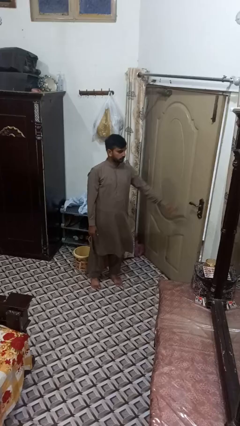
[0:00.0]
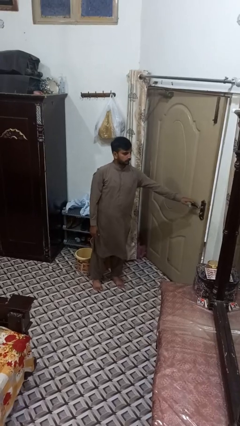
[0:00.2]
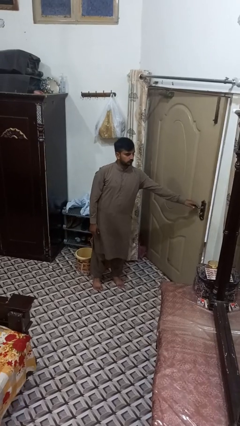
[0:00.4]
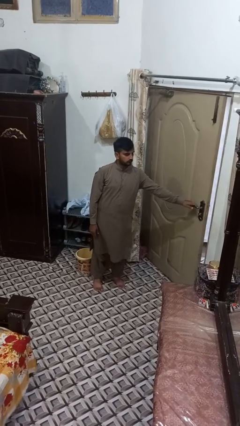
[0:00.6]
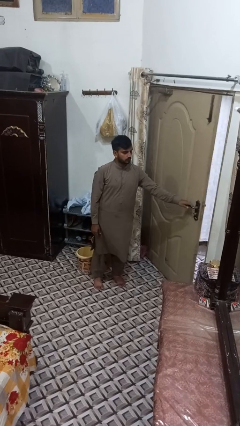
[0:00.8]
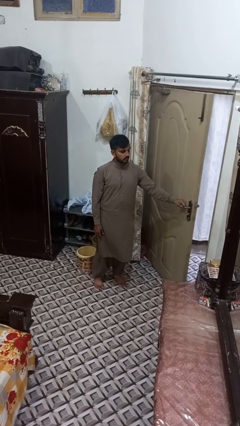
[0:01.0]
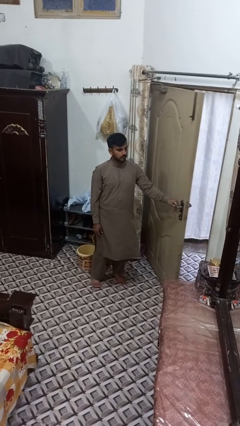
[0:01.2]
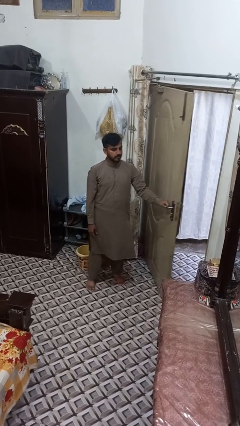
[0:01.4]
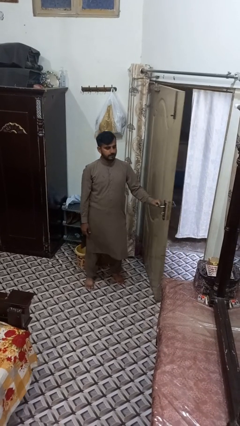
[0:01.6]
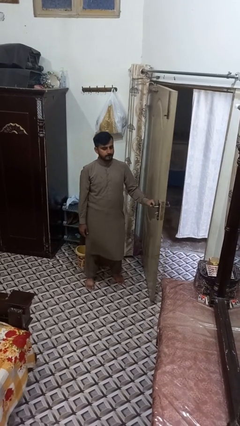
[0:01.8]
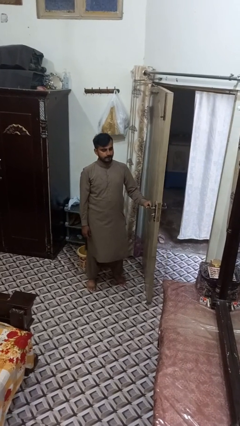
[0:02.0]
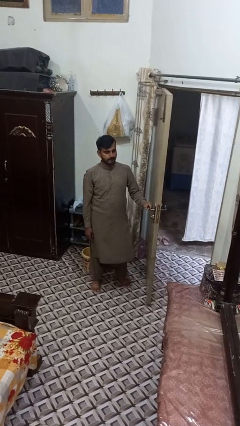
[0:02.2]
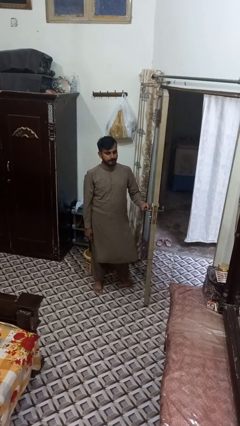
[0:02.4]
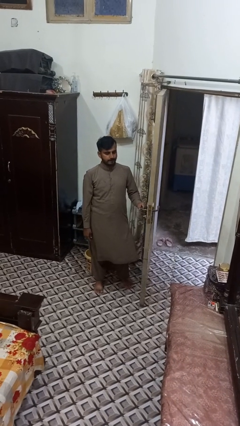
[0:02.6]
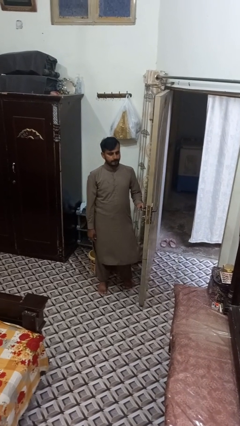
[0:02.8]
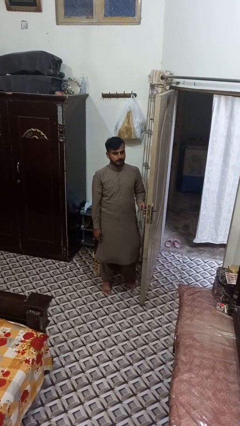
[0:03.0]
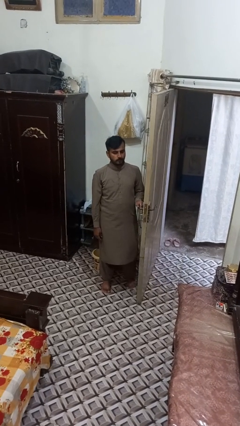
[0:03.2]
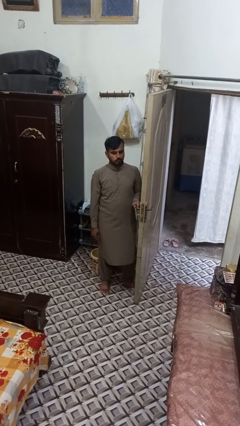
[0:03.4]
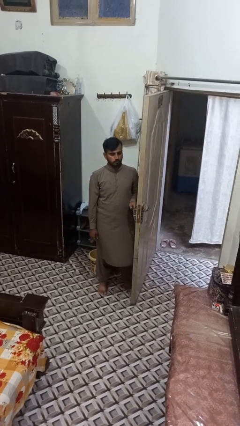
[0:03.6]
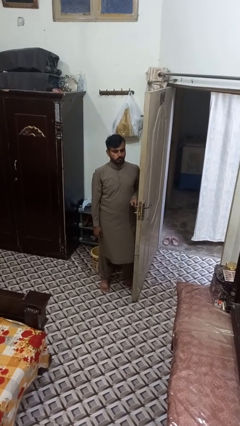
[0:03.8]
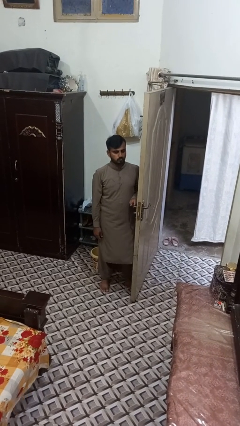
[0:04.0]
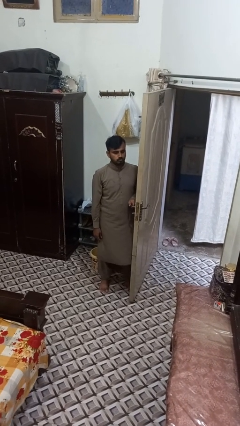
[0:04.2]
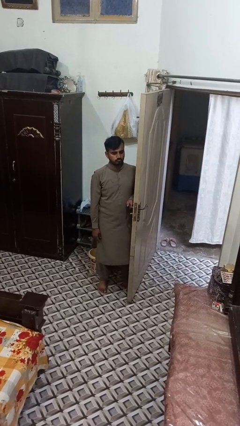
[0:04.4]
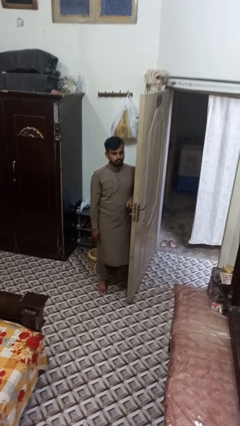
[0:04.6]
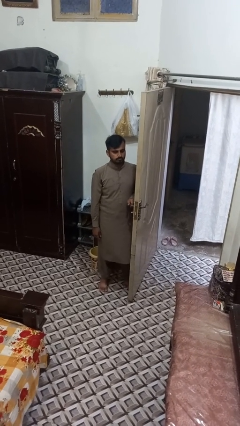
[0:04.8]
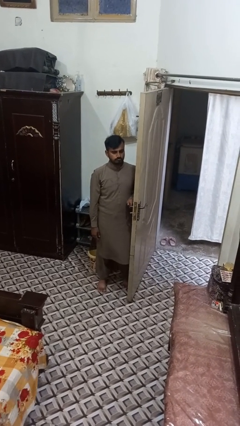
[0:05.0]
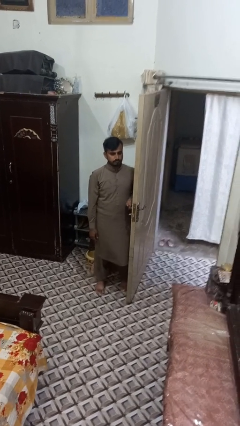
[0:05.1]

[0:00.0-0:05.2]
person opens closet door

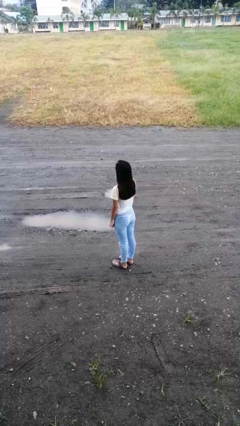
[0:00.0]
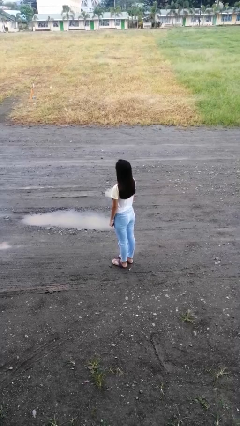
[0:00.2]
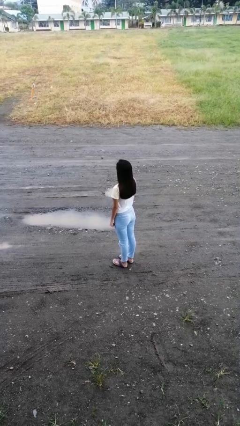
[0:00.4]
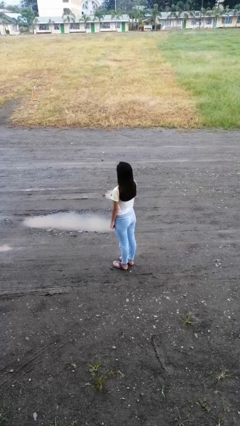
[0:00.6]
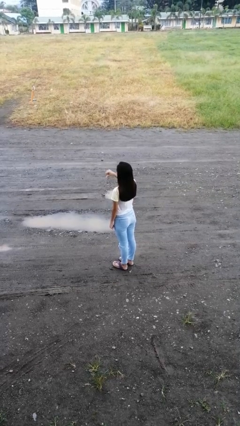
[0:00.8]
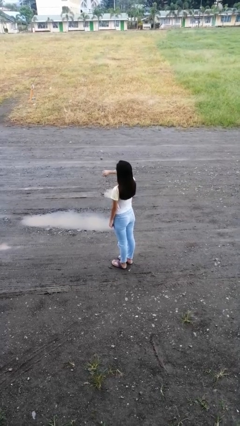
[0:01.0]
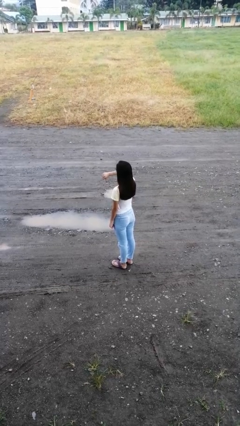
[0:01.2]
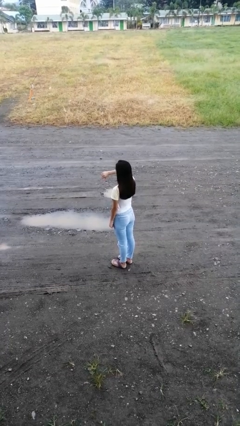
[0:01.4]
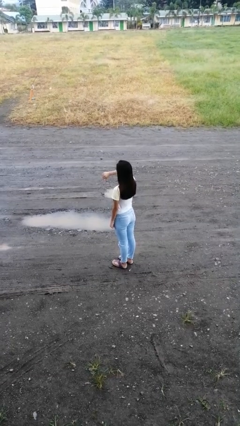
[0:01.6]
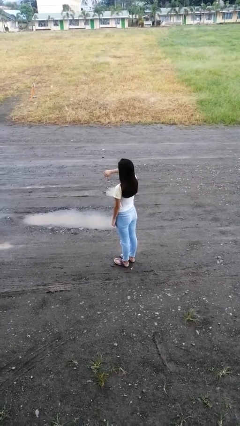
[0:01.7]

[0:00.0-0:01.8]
person gestures thumbs down

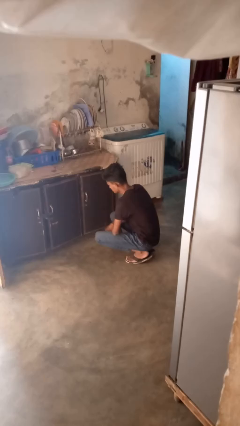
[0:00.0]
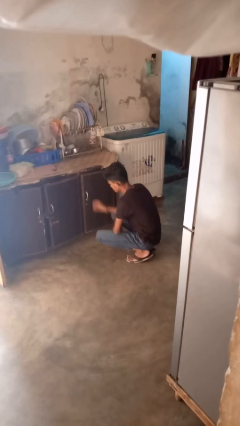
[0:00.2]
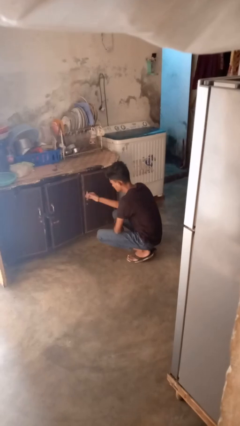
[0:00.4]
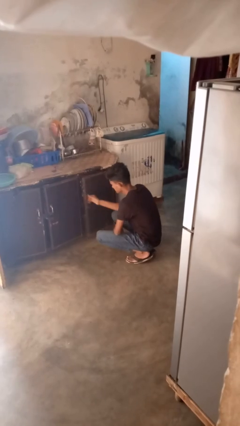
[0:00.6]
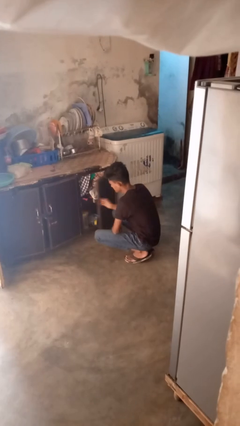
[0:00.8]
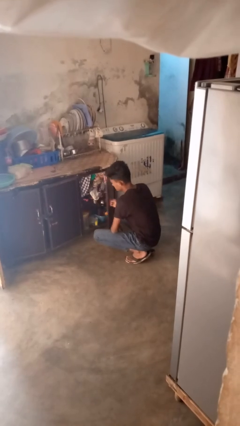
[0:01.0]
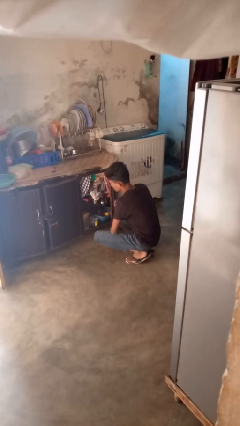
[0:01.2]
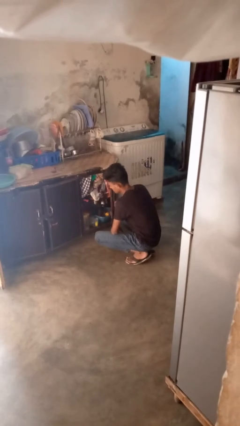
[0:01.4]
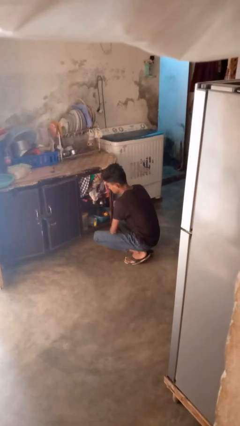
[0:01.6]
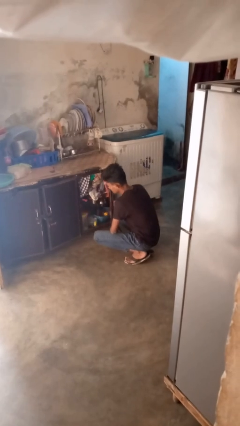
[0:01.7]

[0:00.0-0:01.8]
person opens cabinet

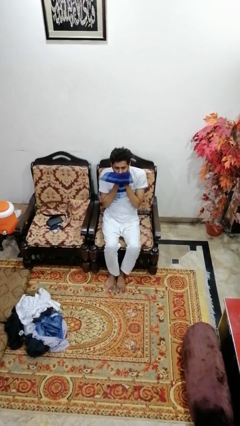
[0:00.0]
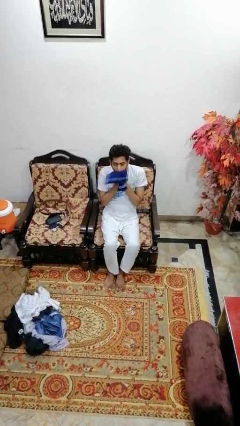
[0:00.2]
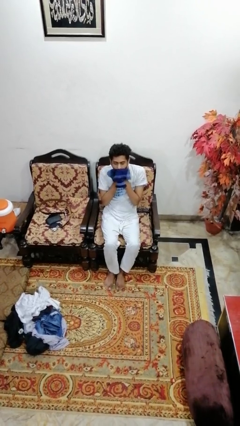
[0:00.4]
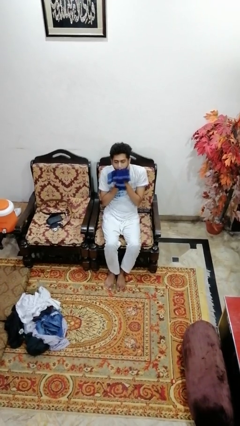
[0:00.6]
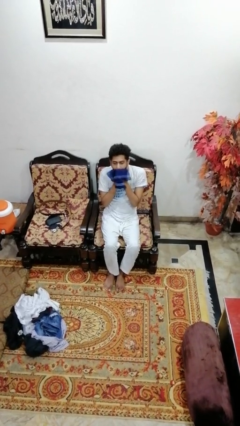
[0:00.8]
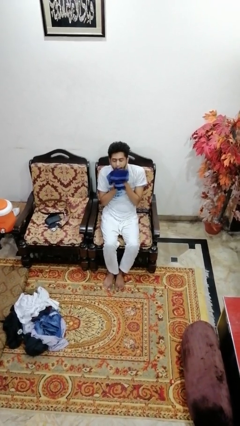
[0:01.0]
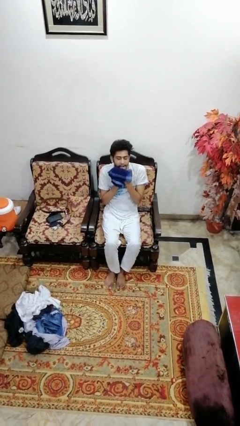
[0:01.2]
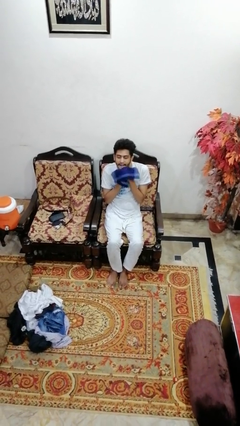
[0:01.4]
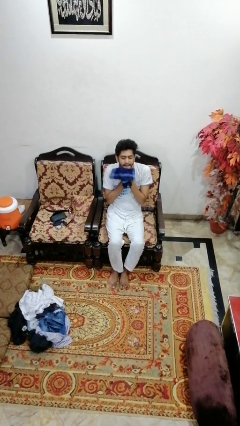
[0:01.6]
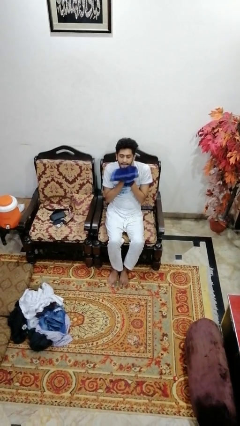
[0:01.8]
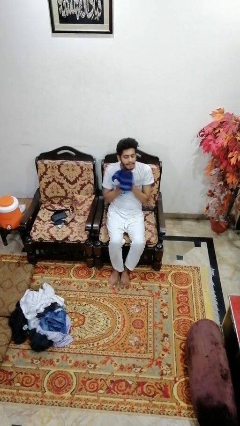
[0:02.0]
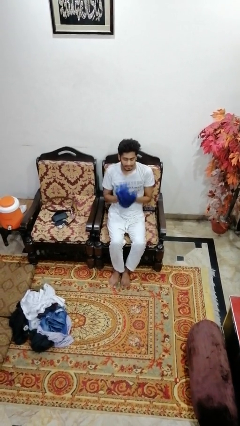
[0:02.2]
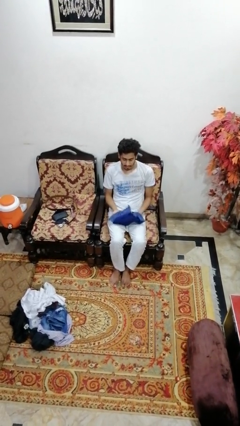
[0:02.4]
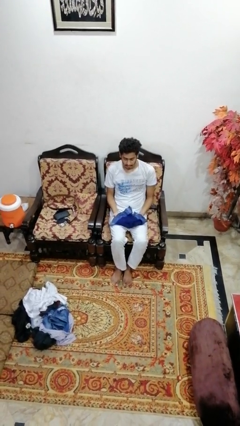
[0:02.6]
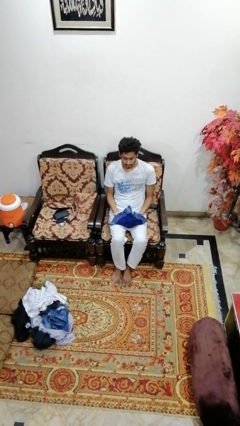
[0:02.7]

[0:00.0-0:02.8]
person wipes mouth with napkin

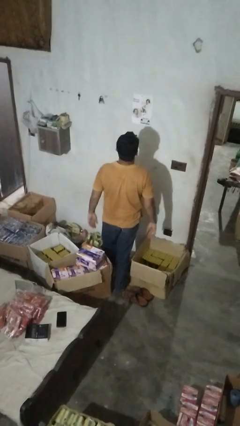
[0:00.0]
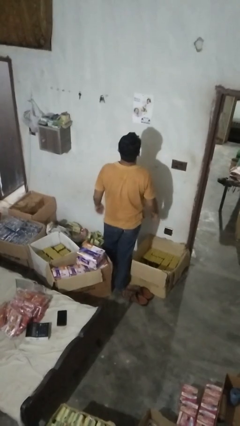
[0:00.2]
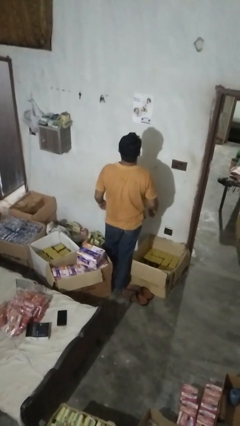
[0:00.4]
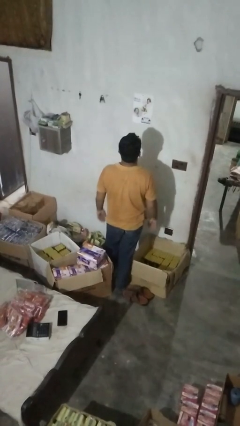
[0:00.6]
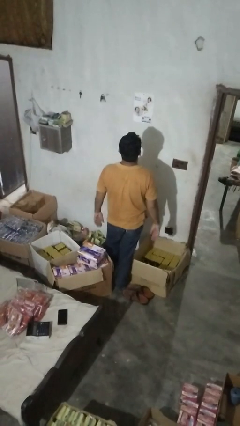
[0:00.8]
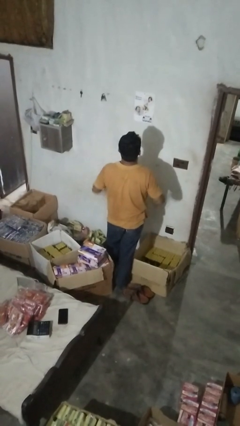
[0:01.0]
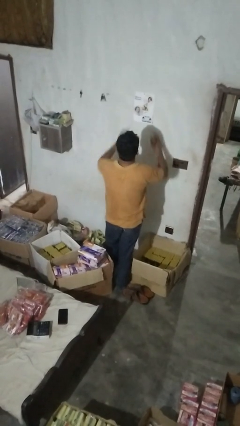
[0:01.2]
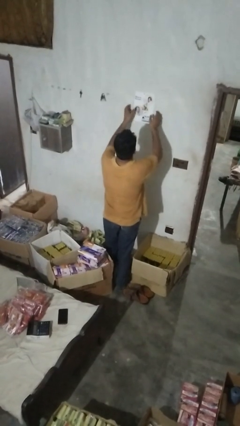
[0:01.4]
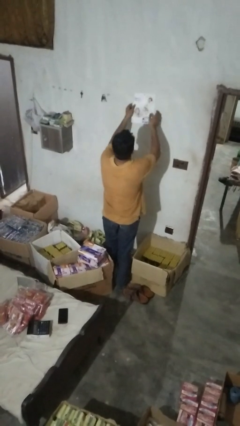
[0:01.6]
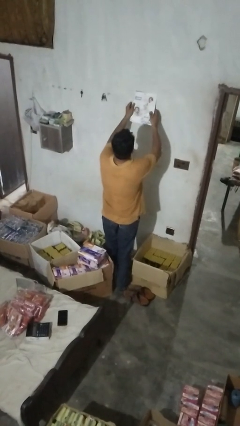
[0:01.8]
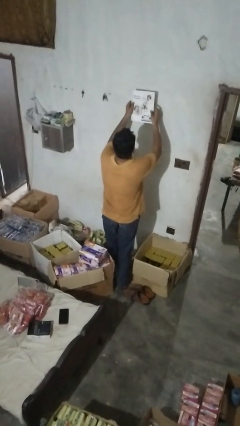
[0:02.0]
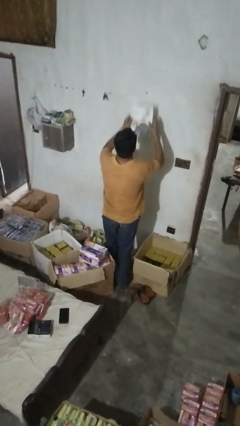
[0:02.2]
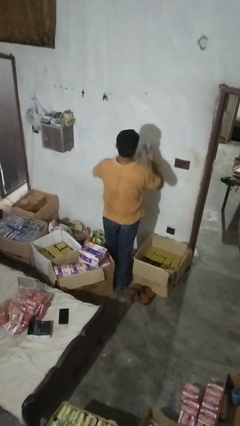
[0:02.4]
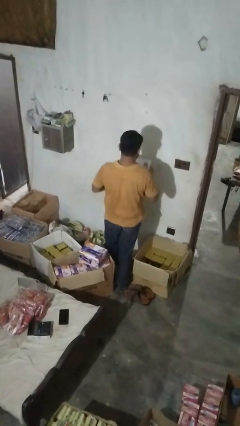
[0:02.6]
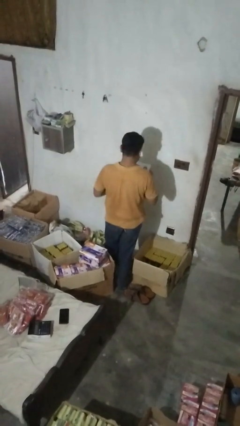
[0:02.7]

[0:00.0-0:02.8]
person takes down picture frame

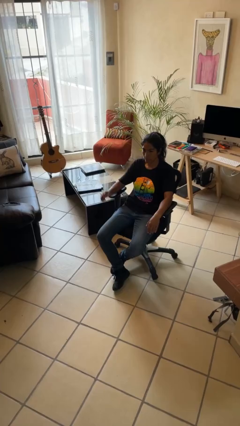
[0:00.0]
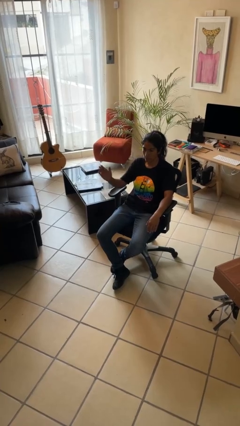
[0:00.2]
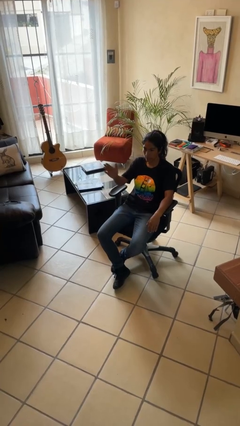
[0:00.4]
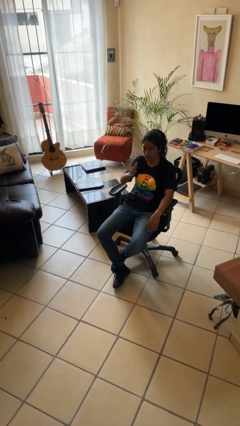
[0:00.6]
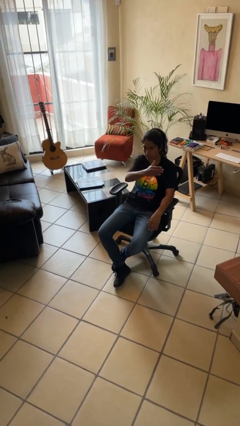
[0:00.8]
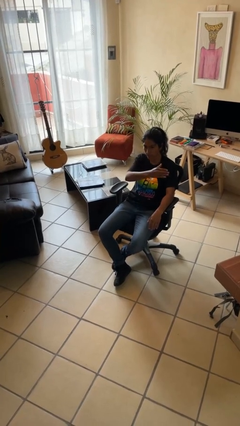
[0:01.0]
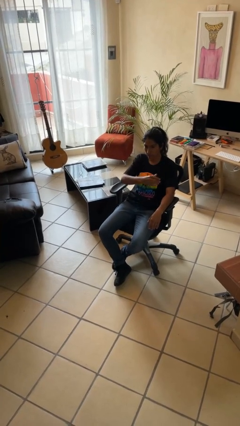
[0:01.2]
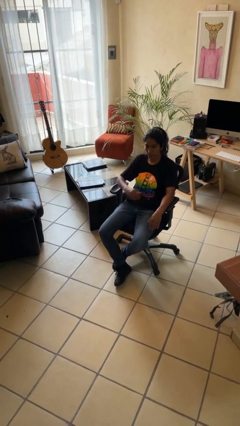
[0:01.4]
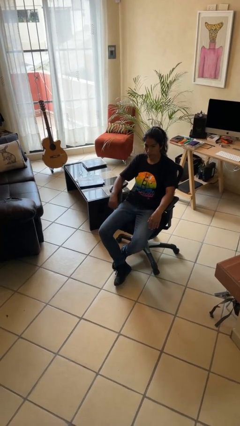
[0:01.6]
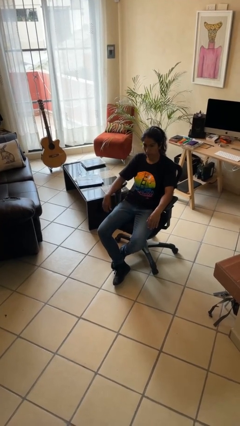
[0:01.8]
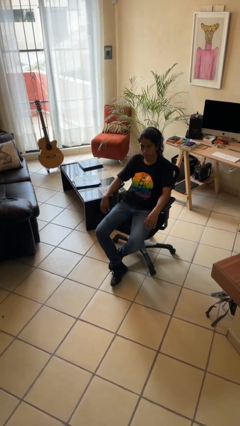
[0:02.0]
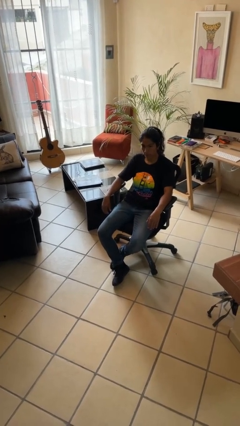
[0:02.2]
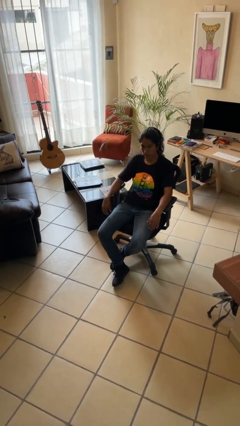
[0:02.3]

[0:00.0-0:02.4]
person gestures swipe left

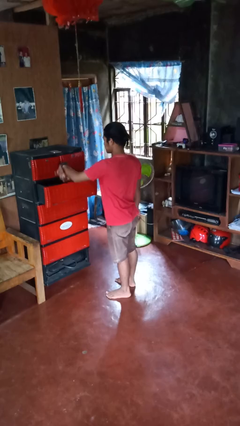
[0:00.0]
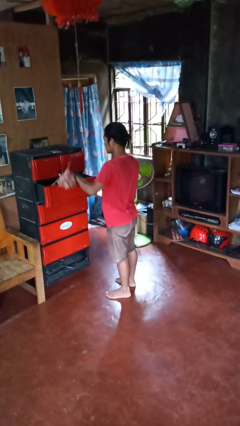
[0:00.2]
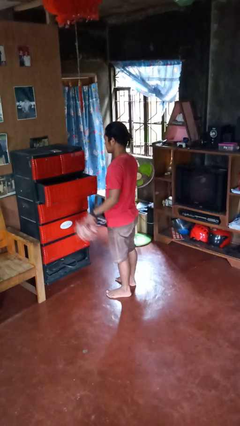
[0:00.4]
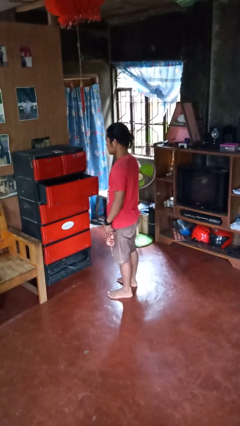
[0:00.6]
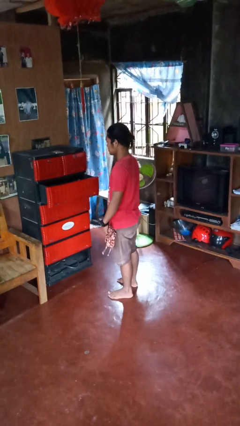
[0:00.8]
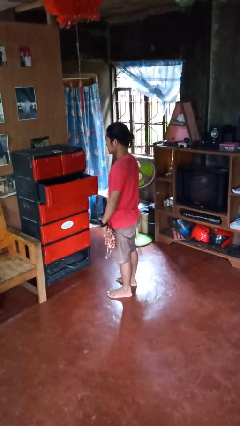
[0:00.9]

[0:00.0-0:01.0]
person takes clothes from dresser
